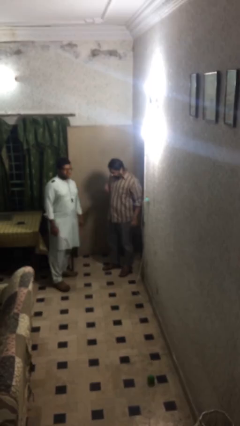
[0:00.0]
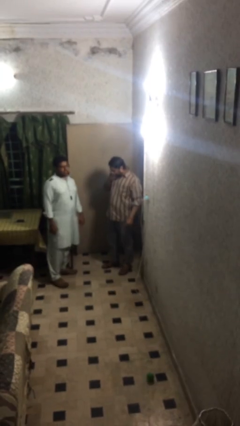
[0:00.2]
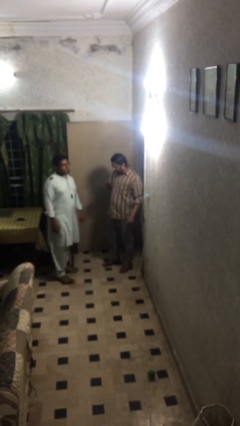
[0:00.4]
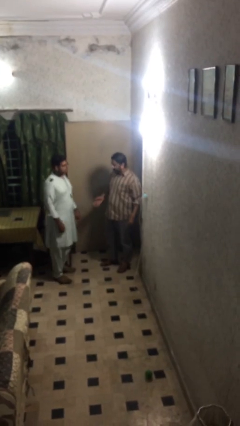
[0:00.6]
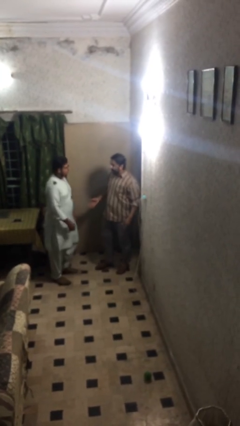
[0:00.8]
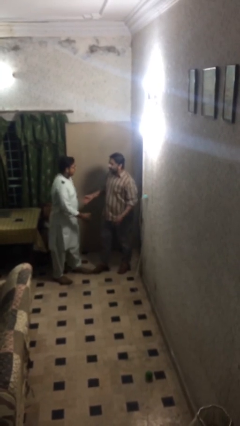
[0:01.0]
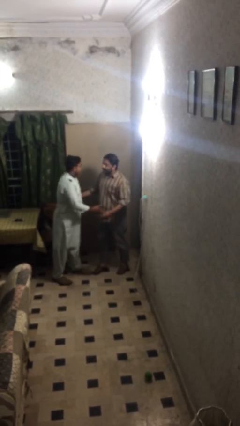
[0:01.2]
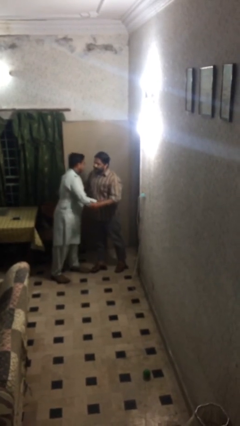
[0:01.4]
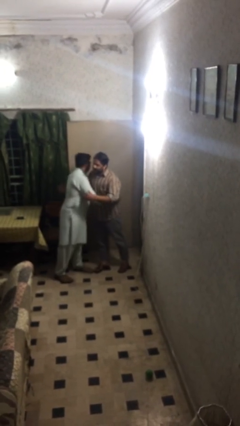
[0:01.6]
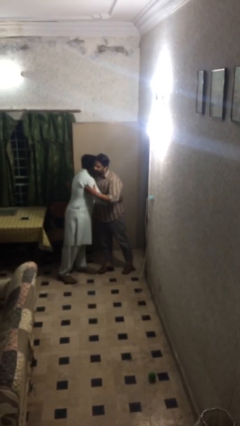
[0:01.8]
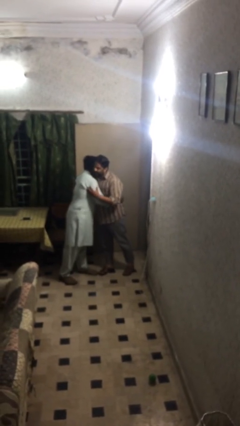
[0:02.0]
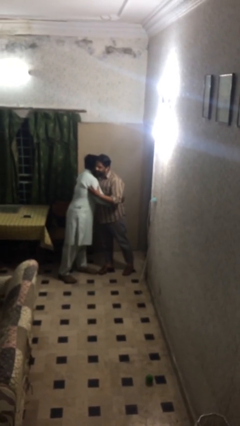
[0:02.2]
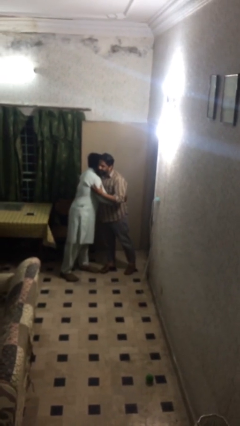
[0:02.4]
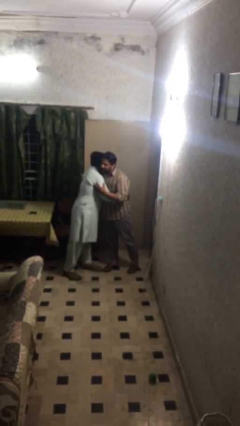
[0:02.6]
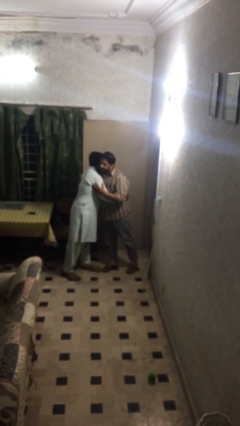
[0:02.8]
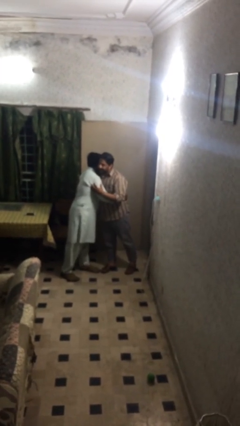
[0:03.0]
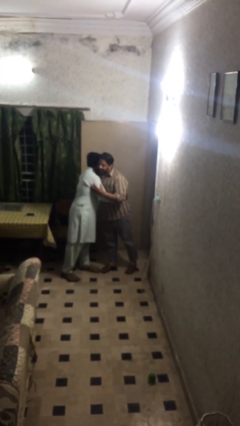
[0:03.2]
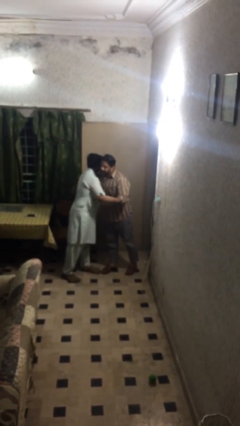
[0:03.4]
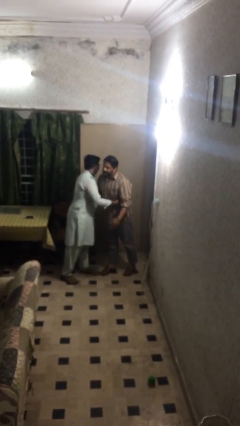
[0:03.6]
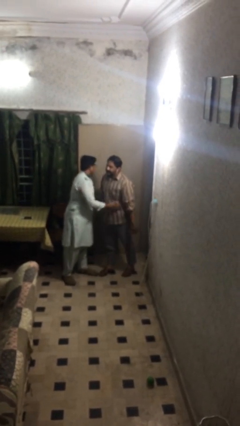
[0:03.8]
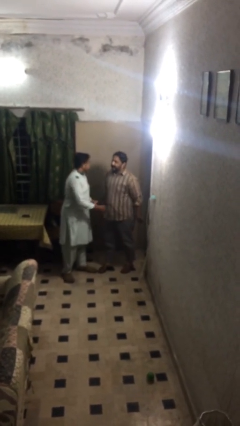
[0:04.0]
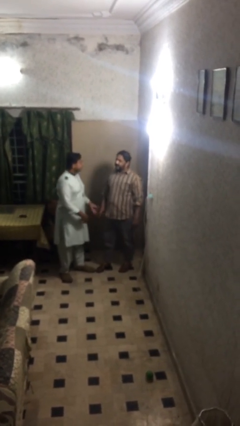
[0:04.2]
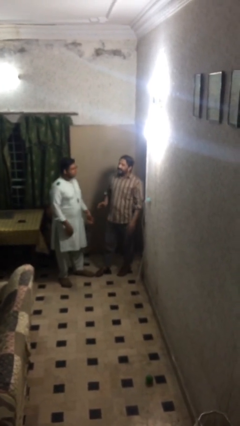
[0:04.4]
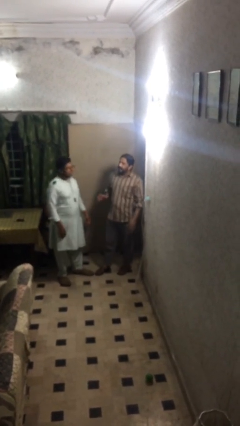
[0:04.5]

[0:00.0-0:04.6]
person embraces person

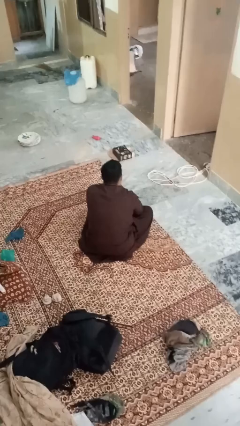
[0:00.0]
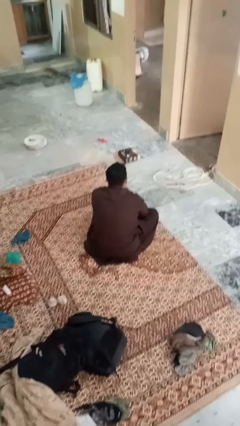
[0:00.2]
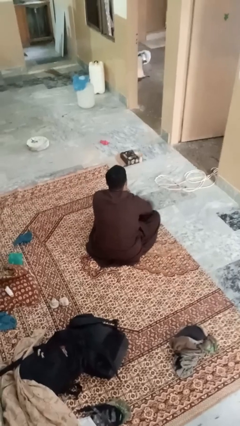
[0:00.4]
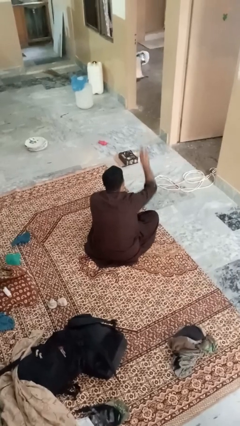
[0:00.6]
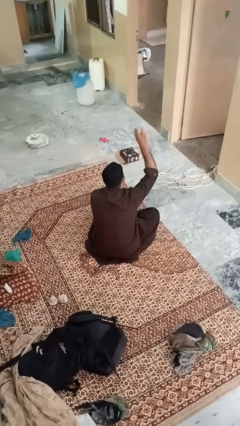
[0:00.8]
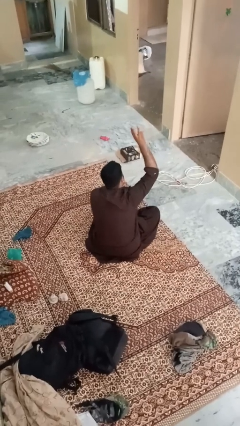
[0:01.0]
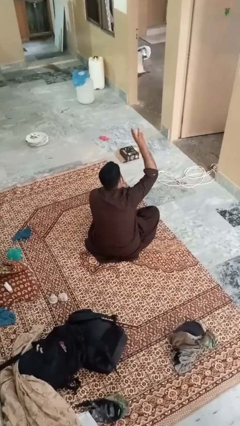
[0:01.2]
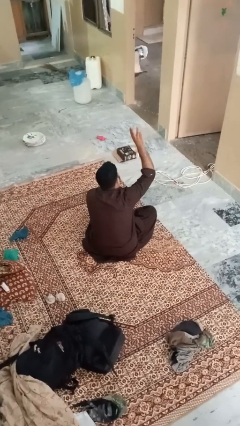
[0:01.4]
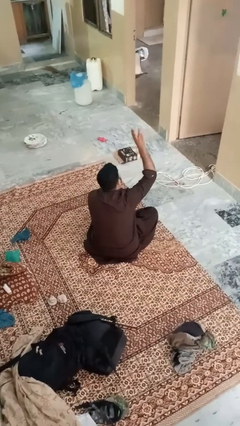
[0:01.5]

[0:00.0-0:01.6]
person gestures number three

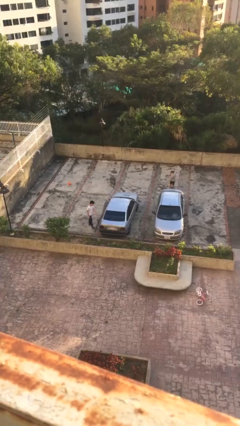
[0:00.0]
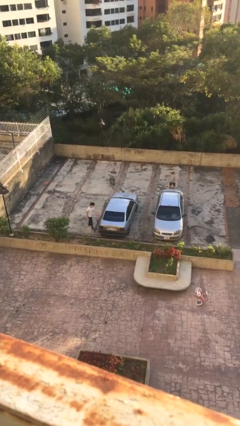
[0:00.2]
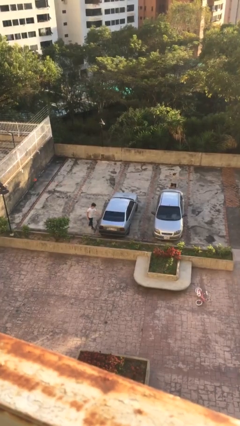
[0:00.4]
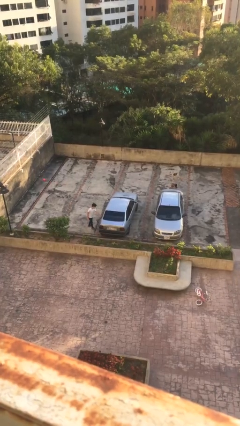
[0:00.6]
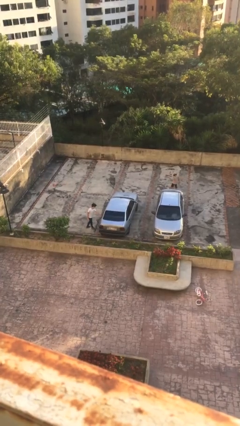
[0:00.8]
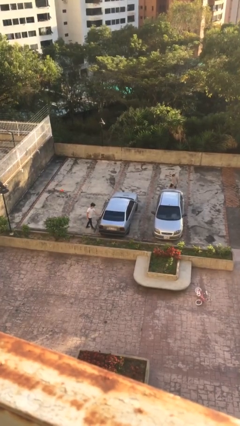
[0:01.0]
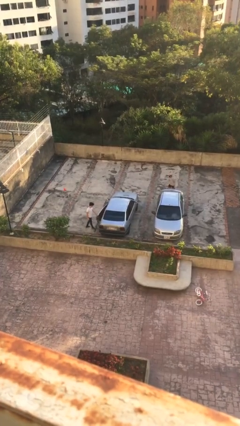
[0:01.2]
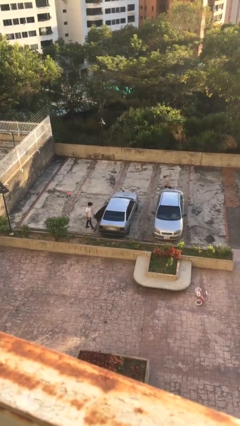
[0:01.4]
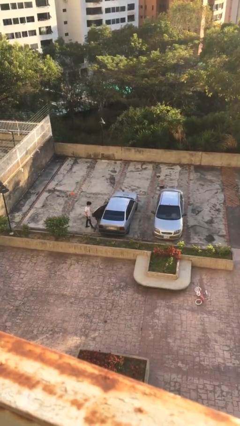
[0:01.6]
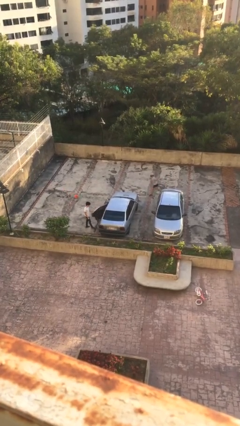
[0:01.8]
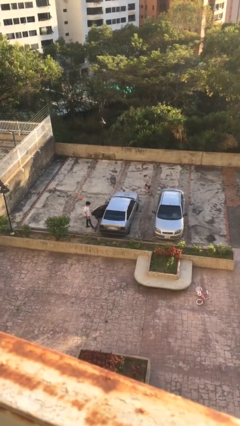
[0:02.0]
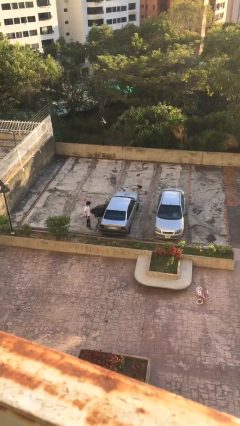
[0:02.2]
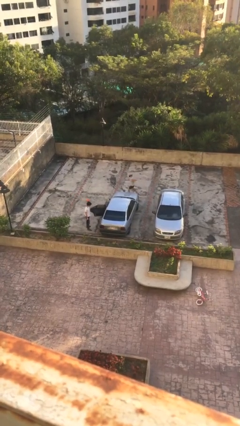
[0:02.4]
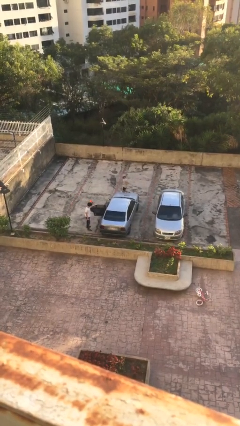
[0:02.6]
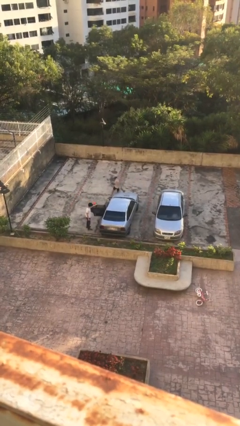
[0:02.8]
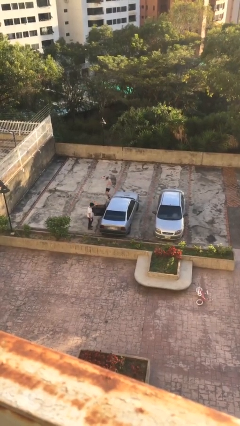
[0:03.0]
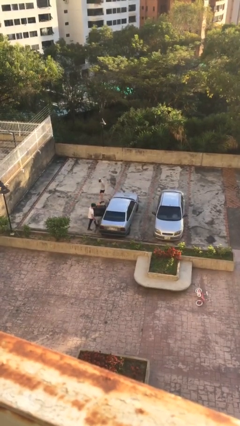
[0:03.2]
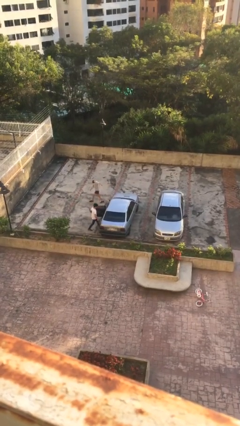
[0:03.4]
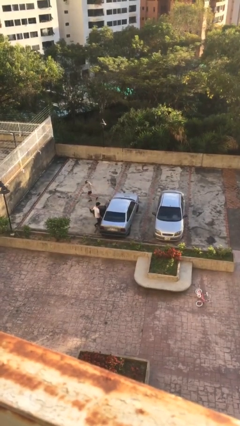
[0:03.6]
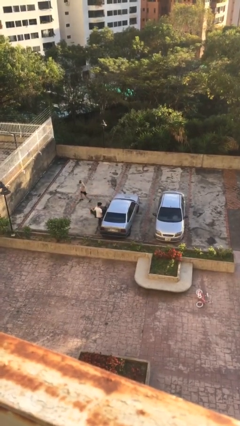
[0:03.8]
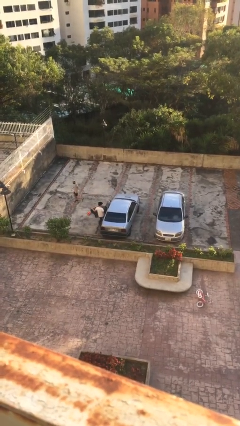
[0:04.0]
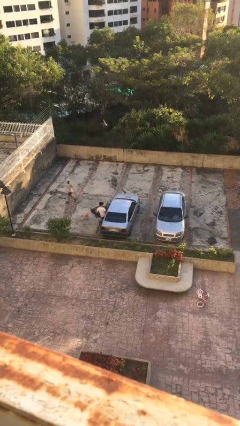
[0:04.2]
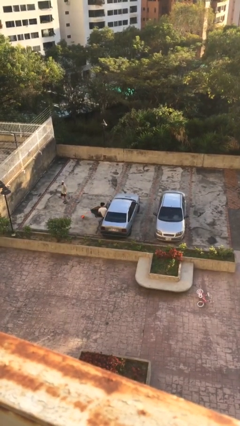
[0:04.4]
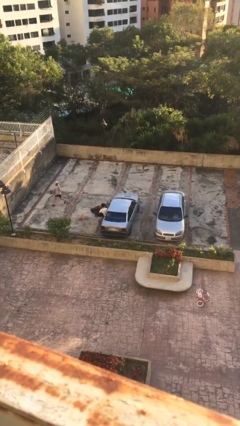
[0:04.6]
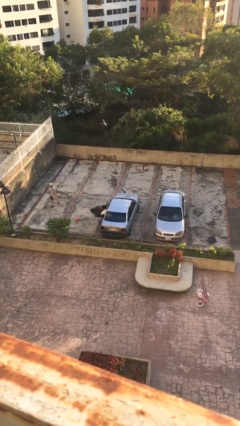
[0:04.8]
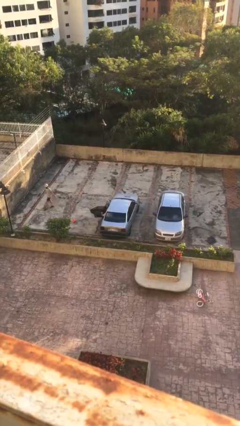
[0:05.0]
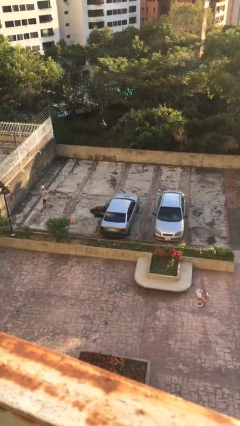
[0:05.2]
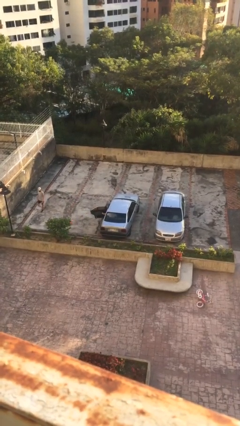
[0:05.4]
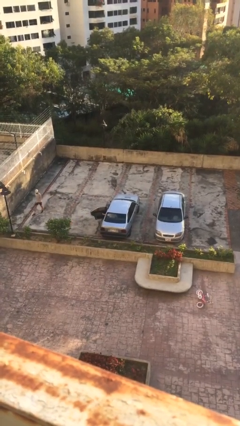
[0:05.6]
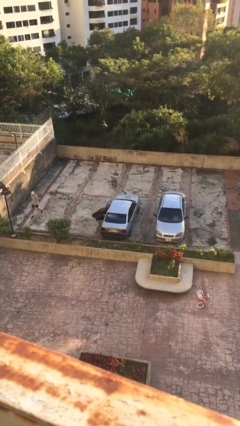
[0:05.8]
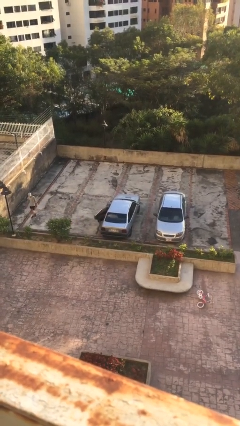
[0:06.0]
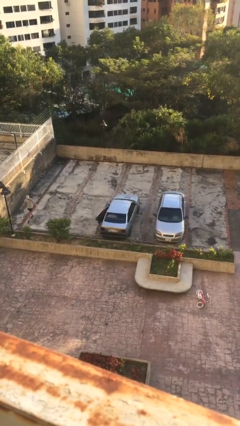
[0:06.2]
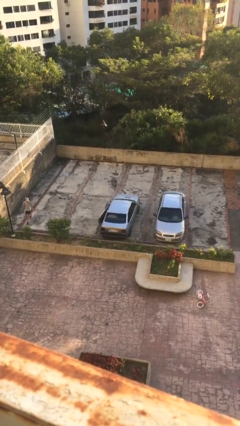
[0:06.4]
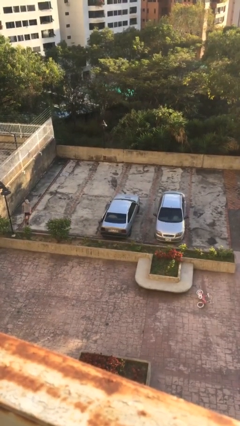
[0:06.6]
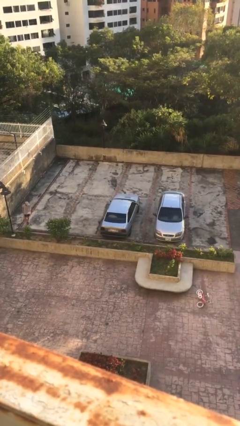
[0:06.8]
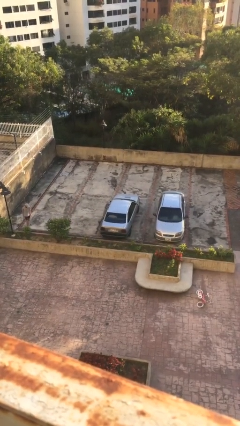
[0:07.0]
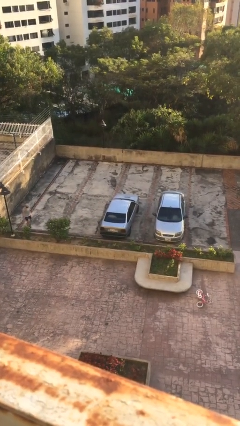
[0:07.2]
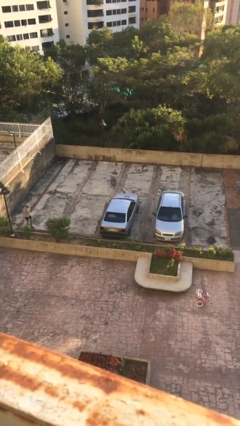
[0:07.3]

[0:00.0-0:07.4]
car picks up person

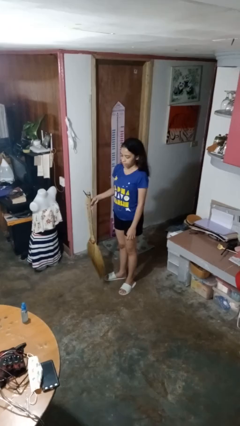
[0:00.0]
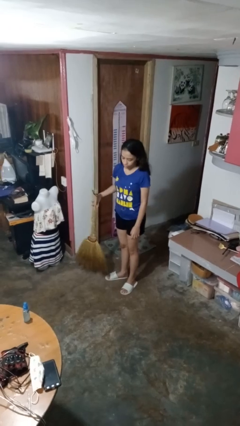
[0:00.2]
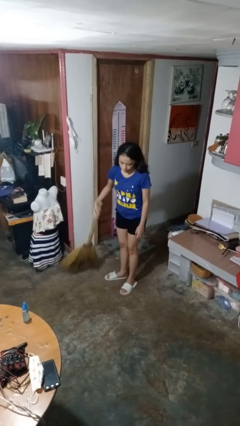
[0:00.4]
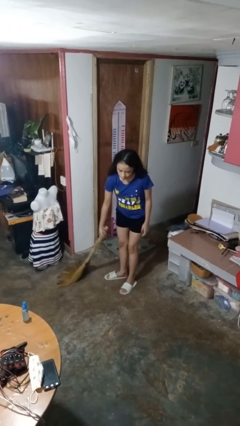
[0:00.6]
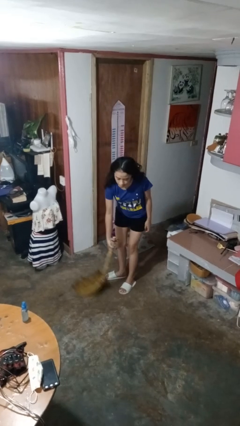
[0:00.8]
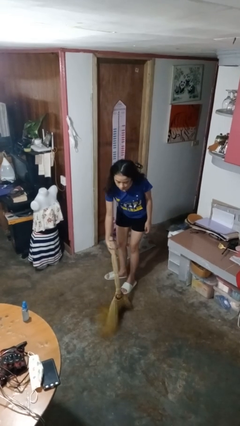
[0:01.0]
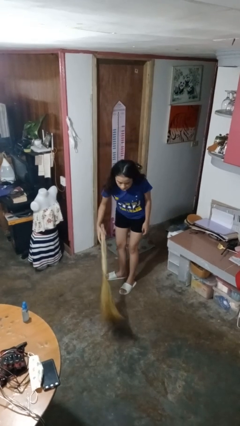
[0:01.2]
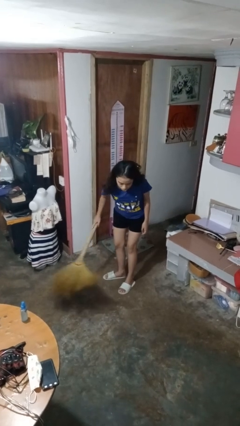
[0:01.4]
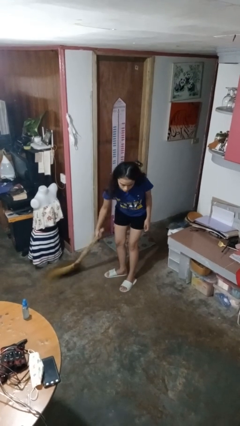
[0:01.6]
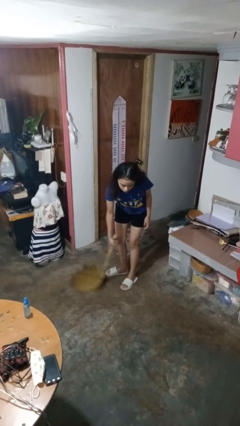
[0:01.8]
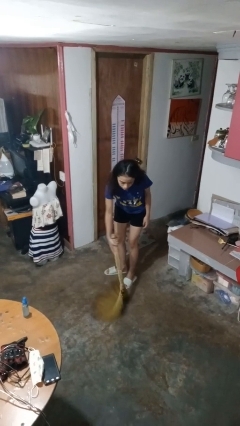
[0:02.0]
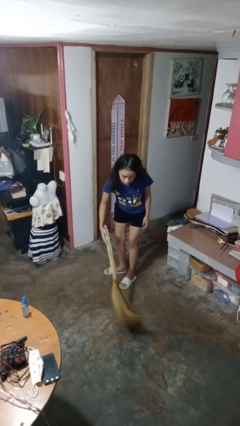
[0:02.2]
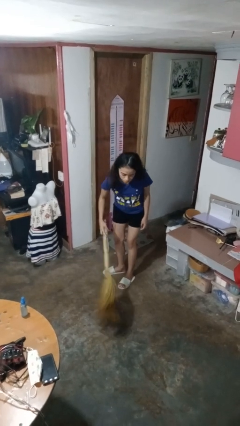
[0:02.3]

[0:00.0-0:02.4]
person sweeps floor

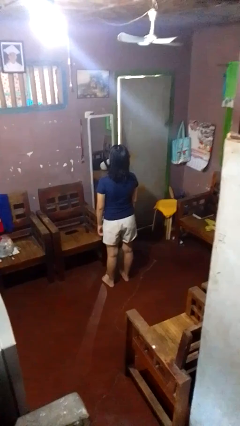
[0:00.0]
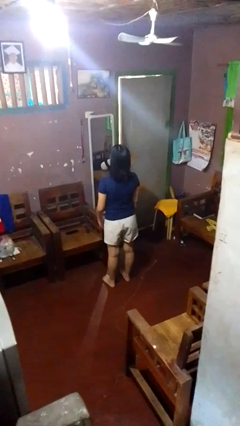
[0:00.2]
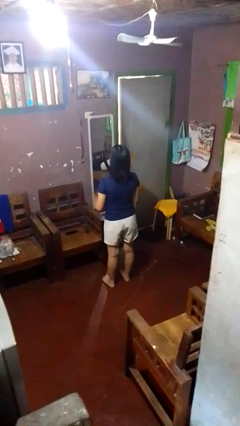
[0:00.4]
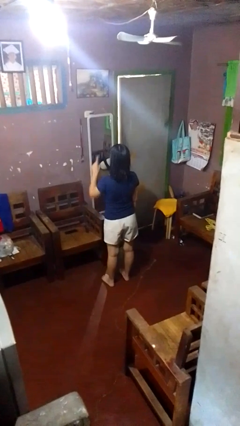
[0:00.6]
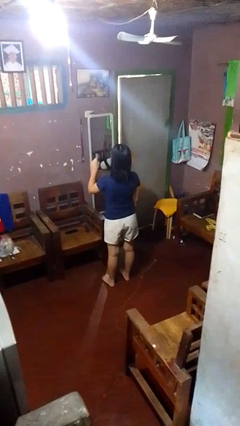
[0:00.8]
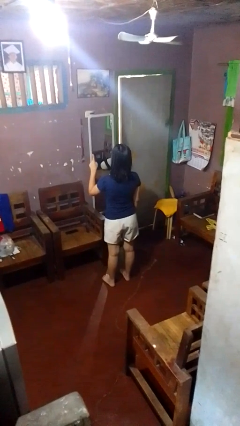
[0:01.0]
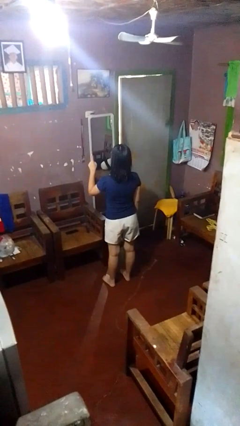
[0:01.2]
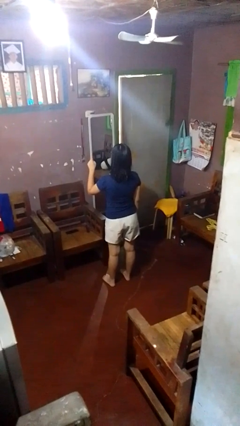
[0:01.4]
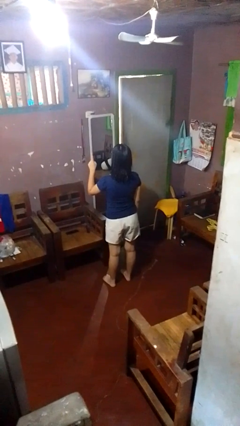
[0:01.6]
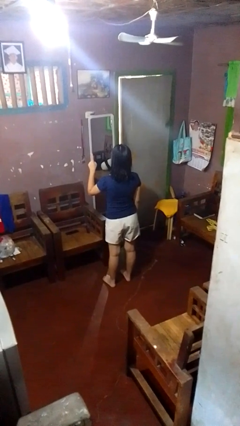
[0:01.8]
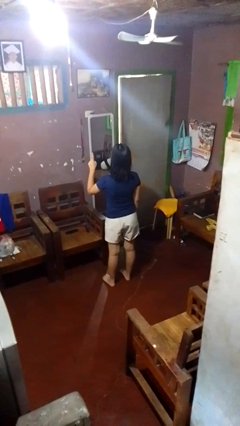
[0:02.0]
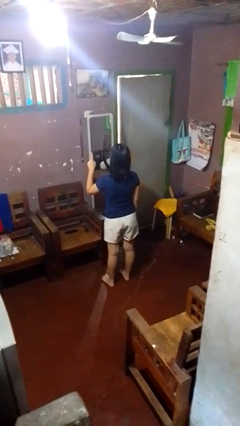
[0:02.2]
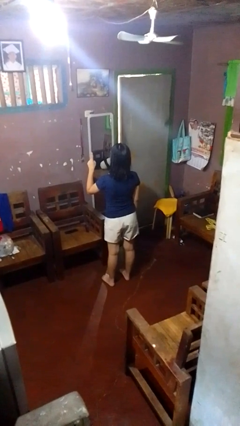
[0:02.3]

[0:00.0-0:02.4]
person gestures number one
